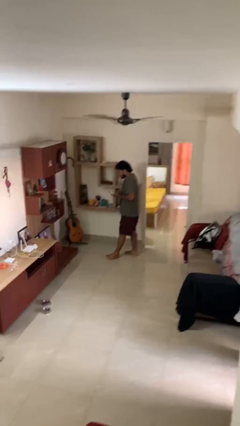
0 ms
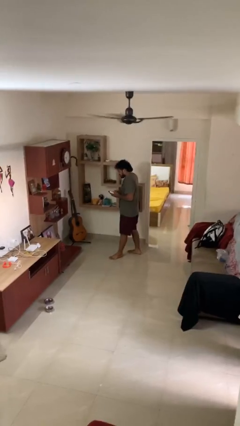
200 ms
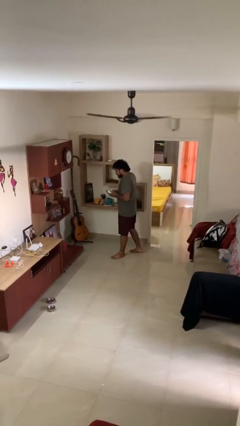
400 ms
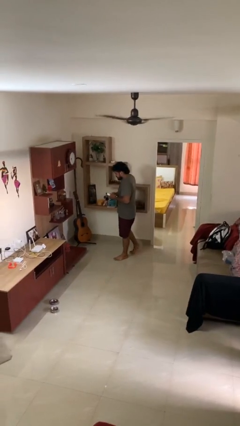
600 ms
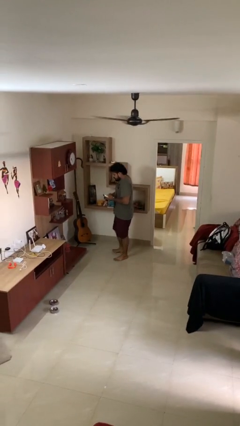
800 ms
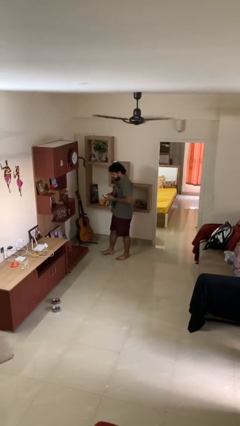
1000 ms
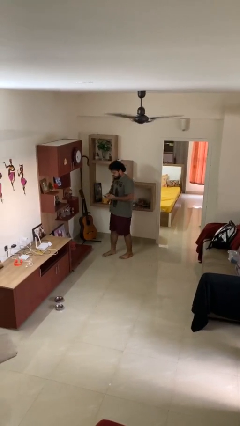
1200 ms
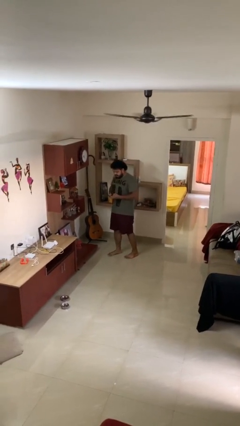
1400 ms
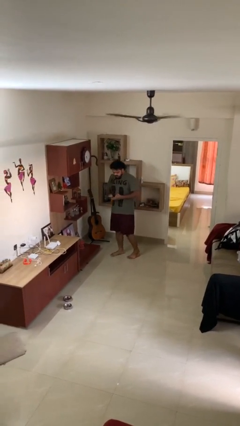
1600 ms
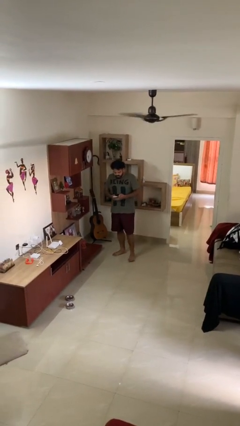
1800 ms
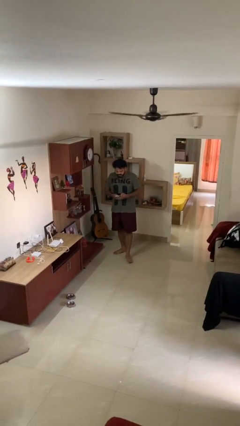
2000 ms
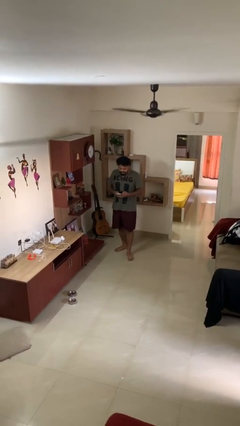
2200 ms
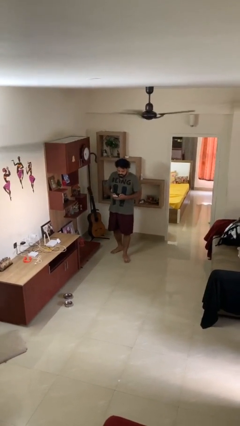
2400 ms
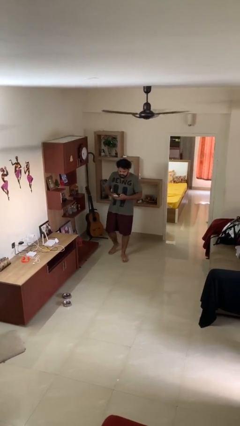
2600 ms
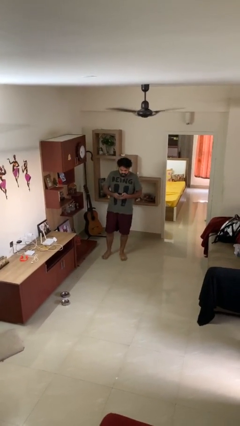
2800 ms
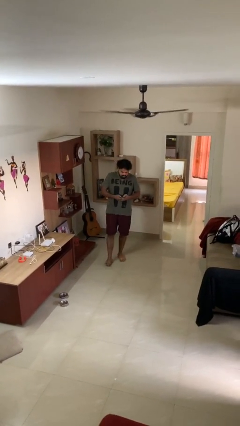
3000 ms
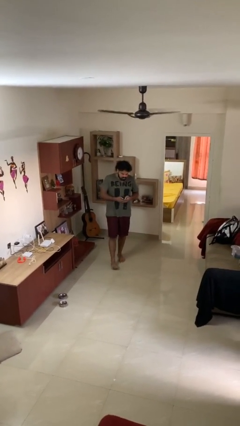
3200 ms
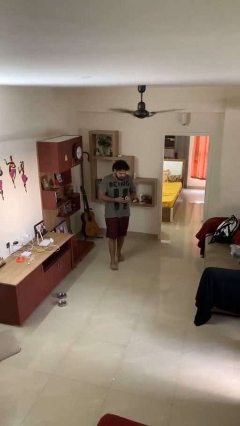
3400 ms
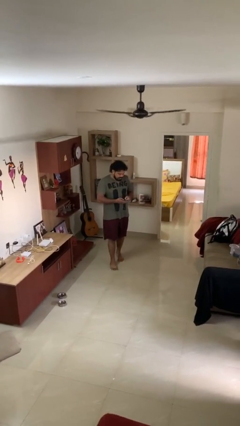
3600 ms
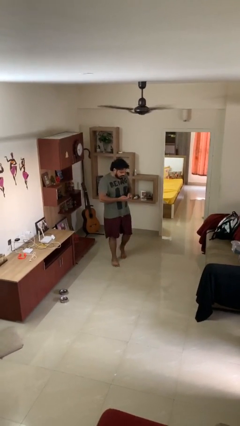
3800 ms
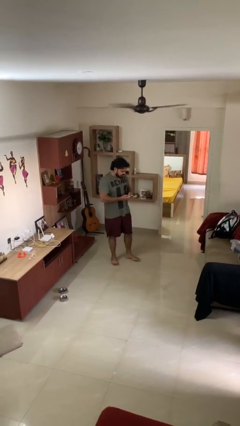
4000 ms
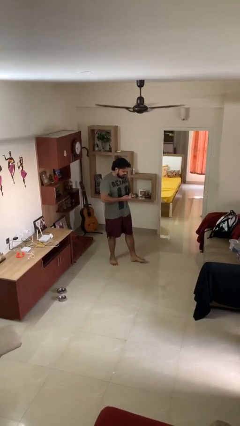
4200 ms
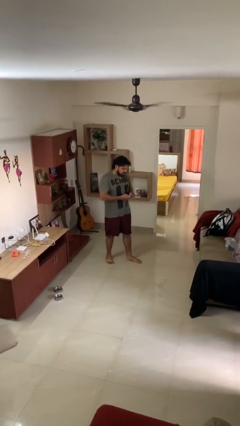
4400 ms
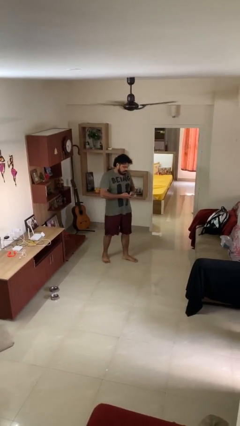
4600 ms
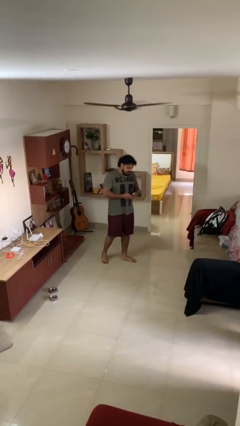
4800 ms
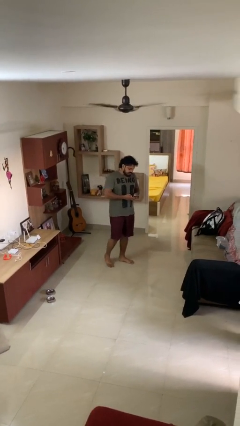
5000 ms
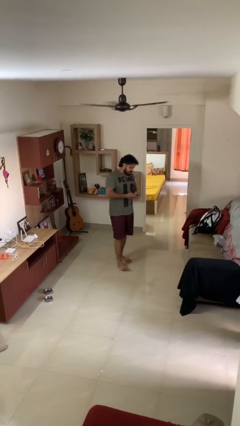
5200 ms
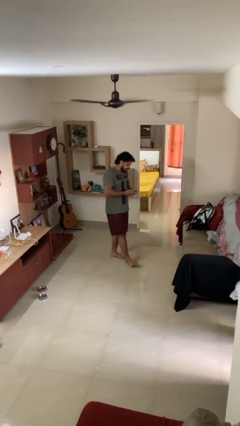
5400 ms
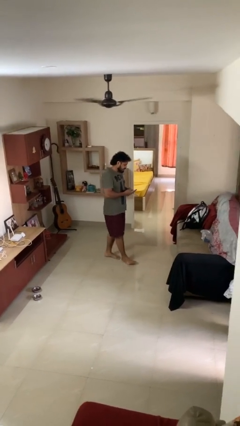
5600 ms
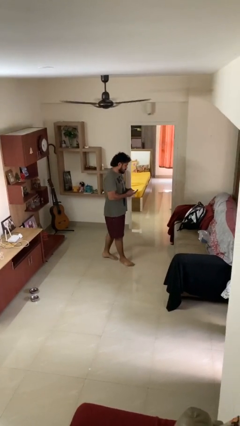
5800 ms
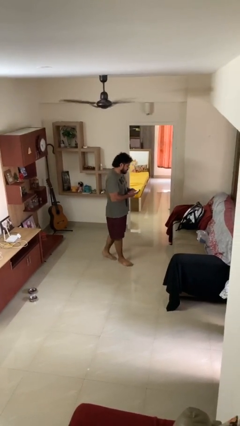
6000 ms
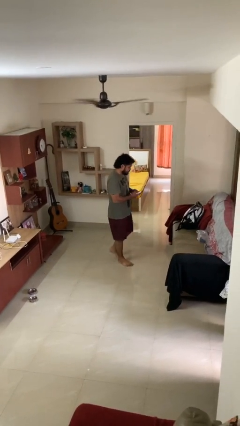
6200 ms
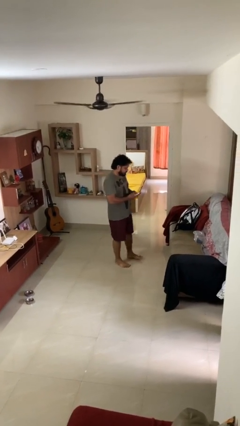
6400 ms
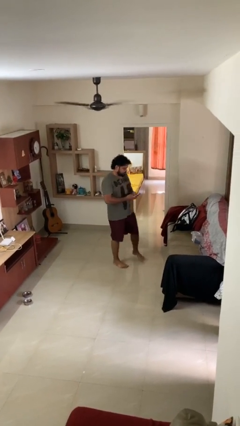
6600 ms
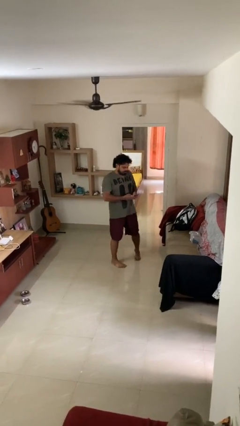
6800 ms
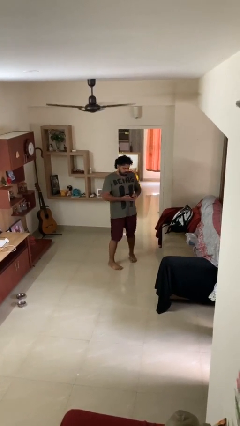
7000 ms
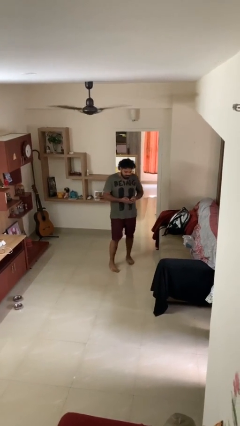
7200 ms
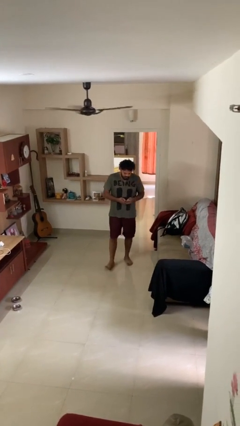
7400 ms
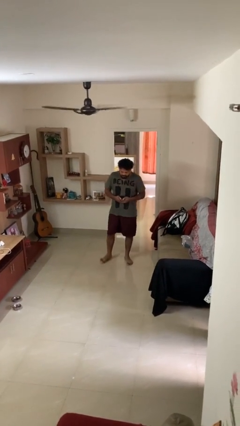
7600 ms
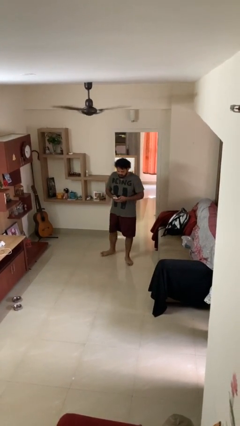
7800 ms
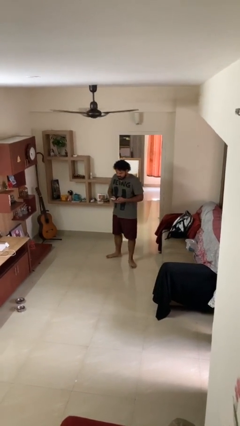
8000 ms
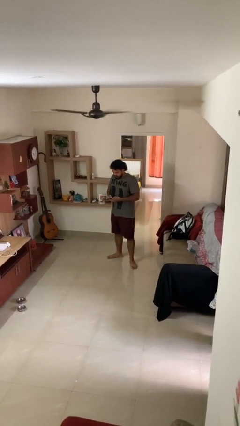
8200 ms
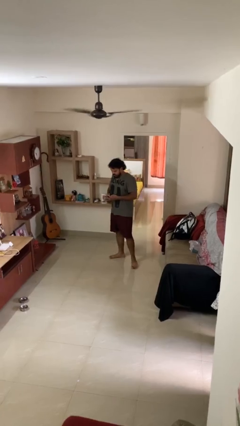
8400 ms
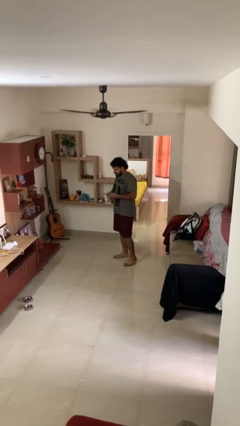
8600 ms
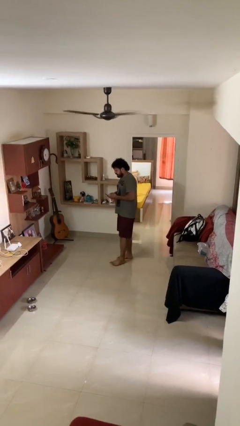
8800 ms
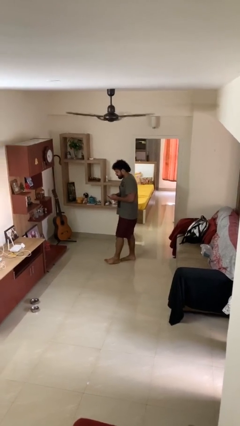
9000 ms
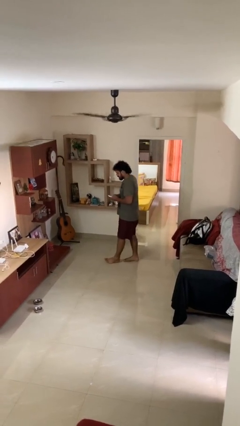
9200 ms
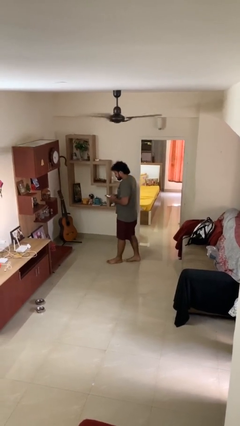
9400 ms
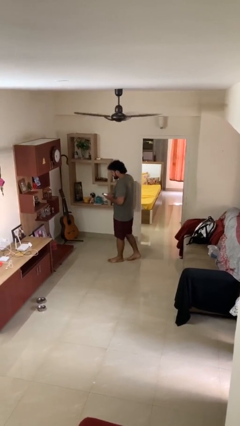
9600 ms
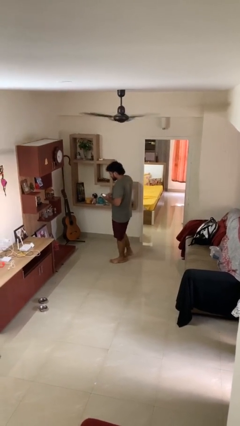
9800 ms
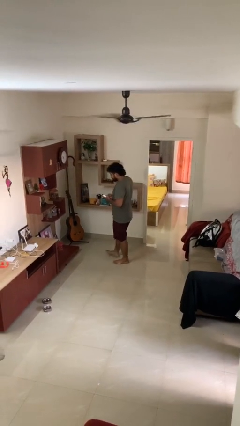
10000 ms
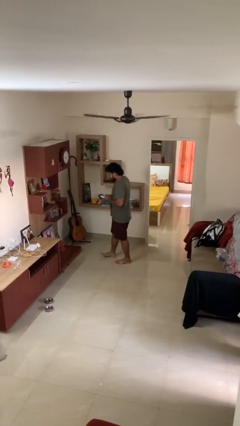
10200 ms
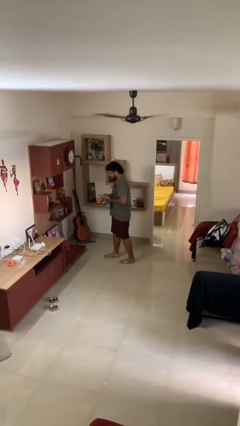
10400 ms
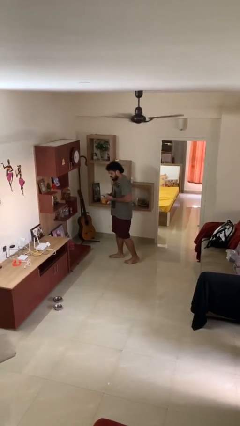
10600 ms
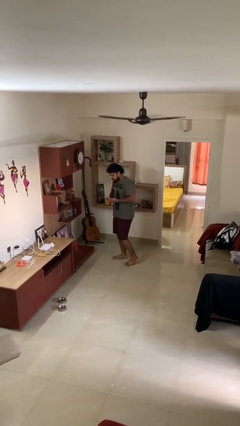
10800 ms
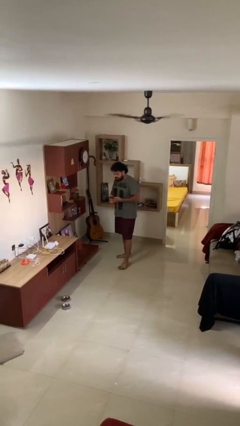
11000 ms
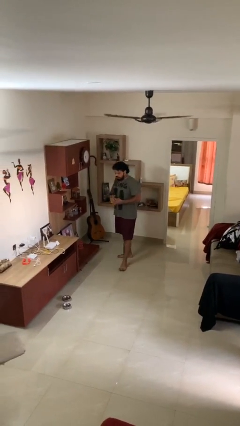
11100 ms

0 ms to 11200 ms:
person texts on phone

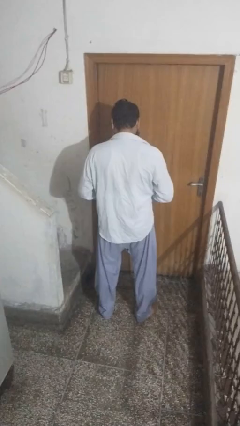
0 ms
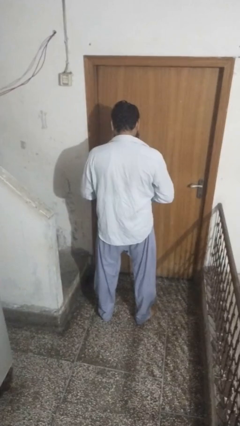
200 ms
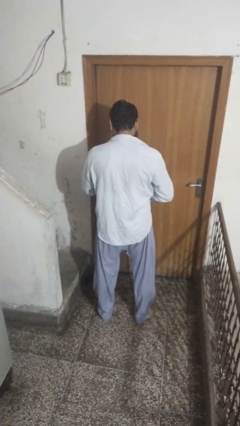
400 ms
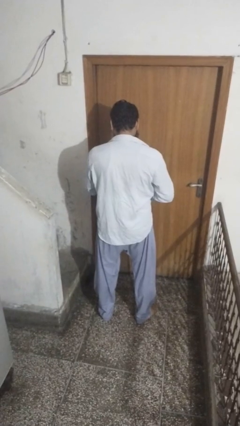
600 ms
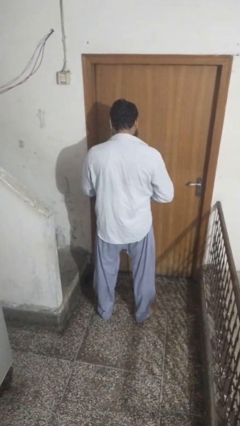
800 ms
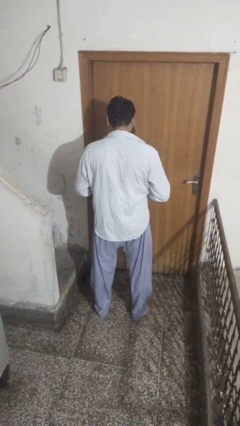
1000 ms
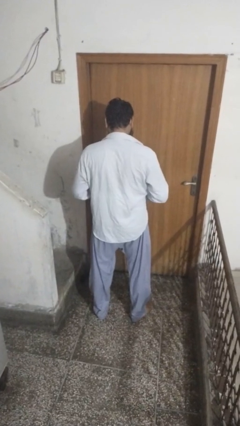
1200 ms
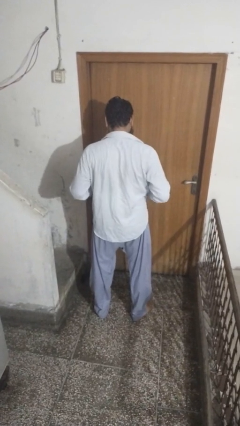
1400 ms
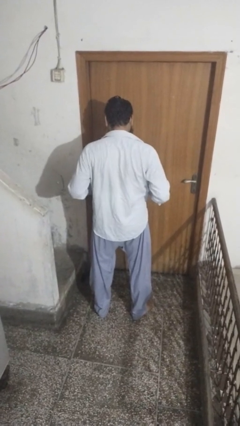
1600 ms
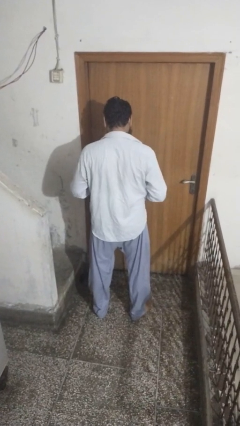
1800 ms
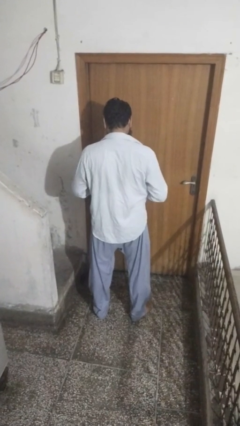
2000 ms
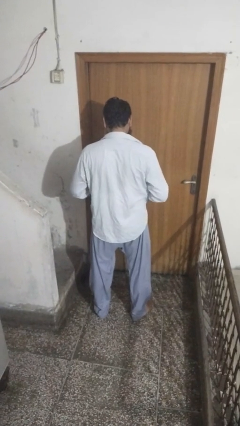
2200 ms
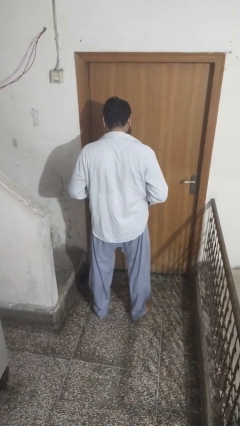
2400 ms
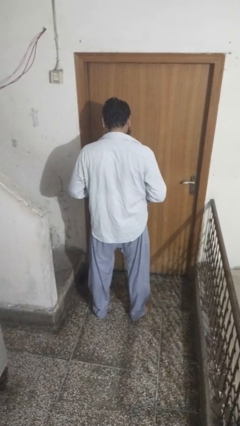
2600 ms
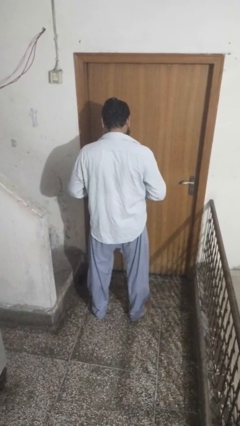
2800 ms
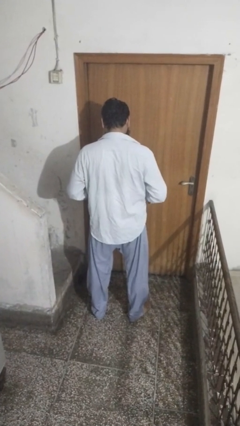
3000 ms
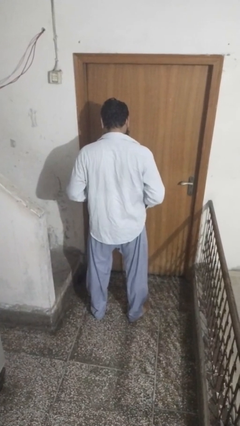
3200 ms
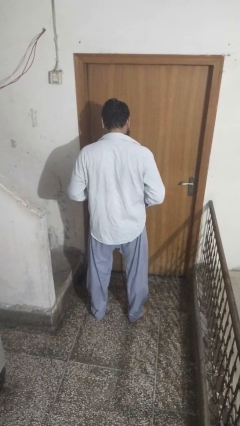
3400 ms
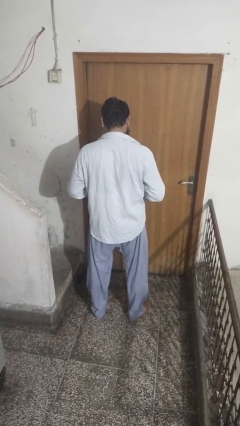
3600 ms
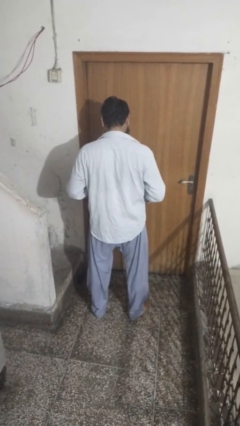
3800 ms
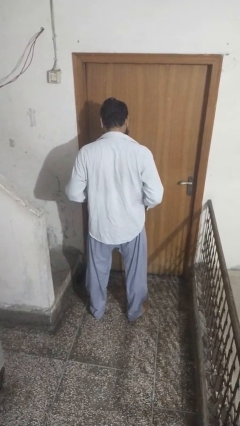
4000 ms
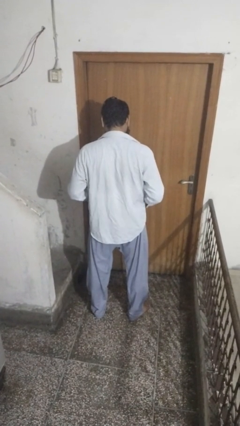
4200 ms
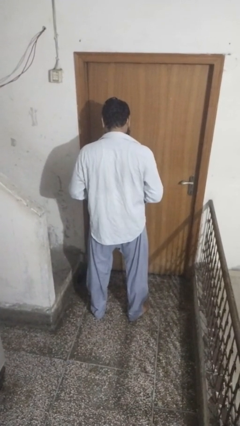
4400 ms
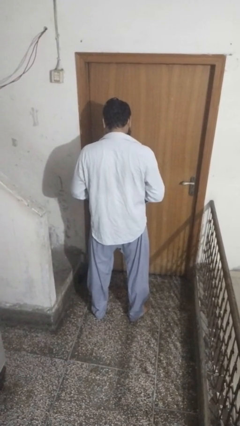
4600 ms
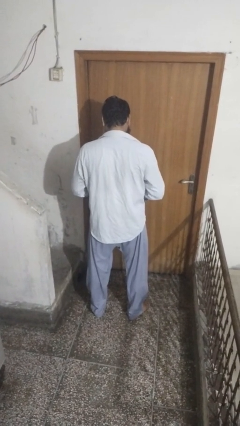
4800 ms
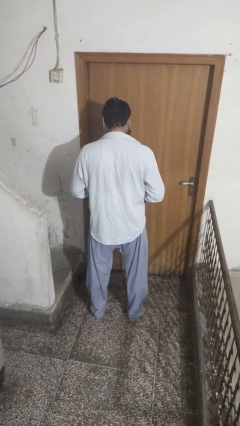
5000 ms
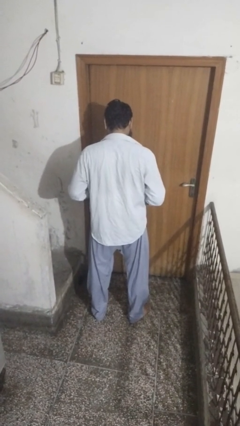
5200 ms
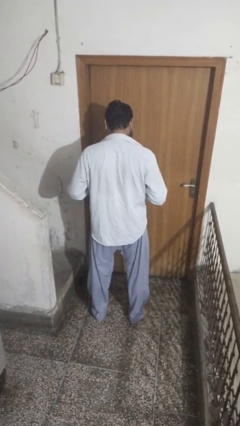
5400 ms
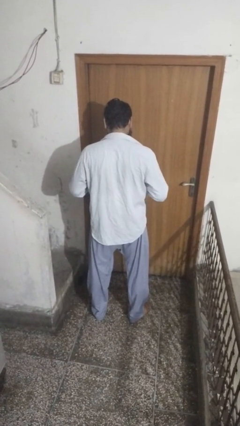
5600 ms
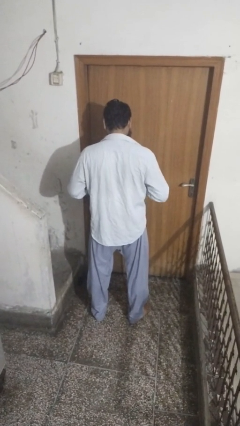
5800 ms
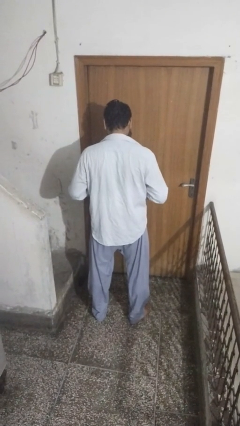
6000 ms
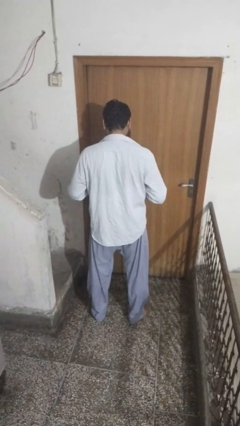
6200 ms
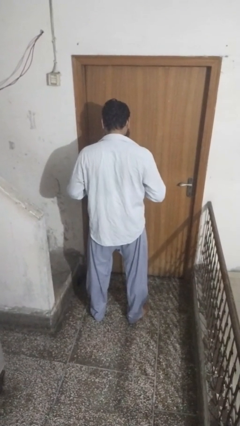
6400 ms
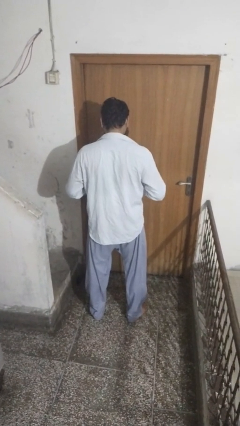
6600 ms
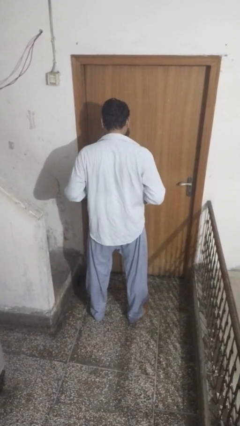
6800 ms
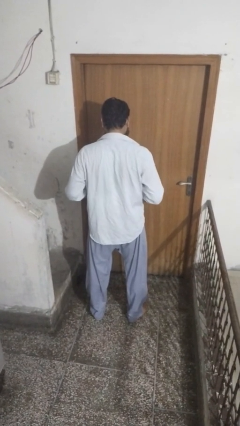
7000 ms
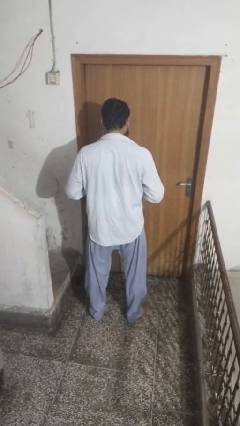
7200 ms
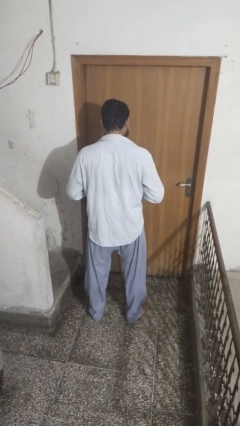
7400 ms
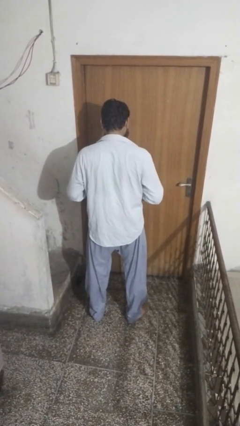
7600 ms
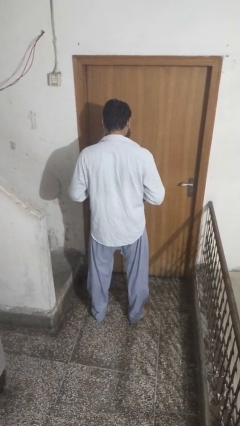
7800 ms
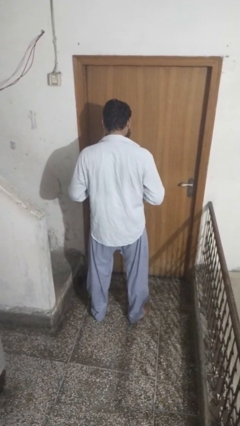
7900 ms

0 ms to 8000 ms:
person unbuttons shirt
